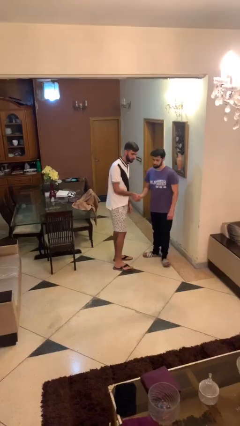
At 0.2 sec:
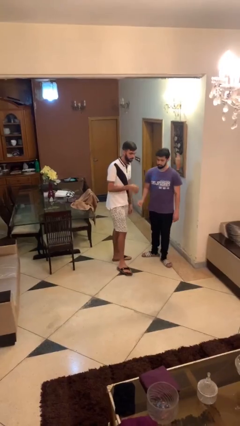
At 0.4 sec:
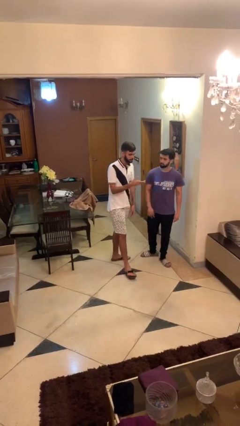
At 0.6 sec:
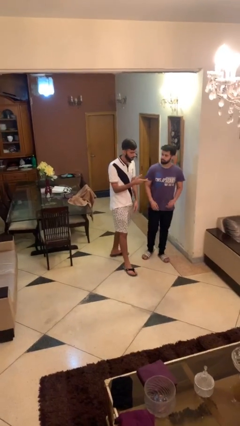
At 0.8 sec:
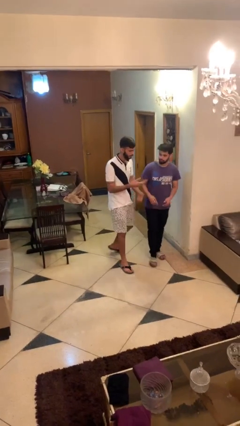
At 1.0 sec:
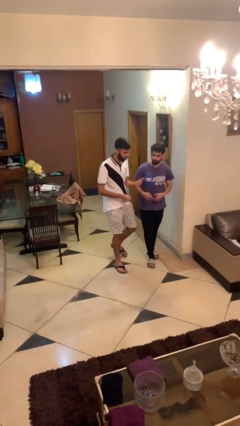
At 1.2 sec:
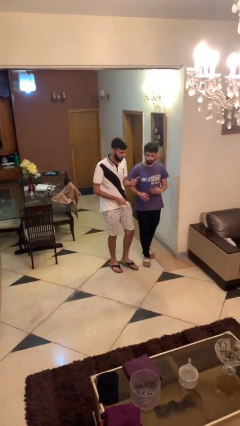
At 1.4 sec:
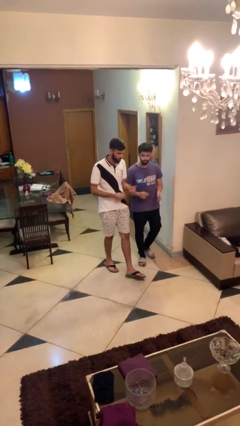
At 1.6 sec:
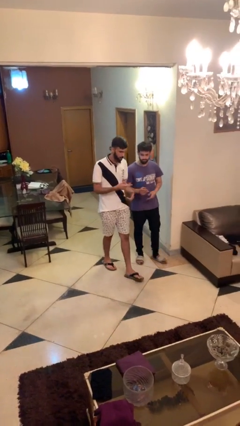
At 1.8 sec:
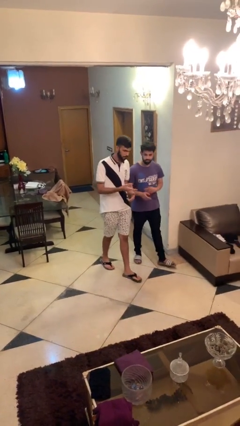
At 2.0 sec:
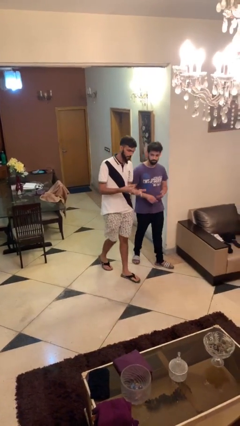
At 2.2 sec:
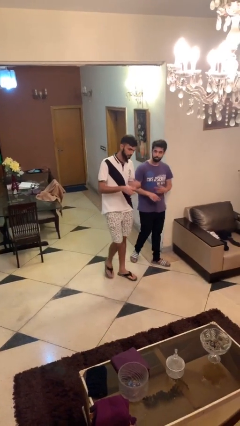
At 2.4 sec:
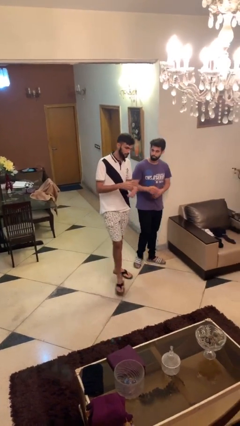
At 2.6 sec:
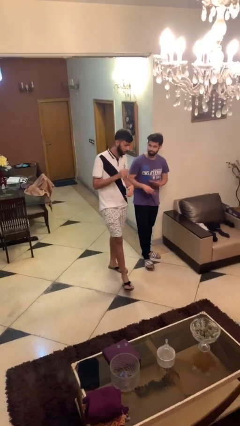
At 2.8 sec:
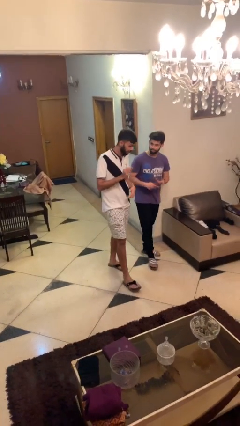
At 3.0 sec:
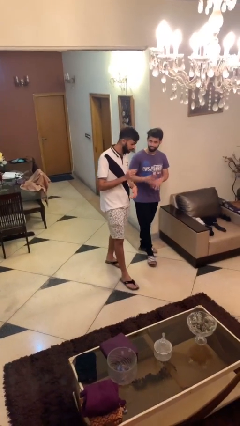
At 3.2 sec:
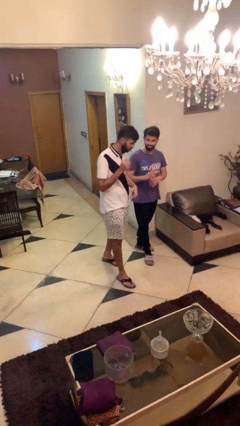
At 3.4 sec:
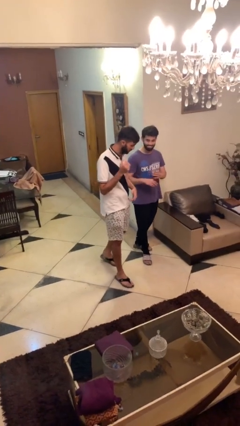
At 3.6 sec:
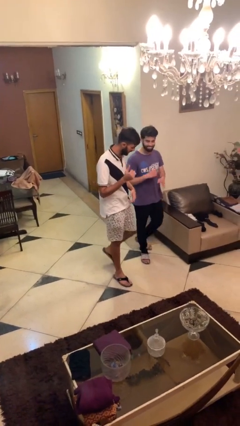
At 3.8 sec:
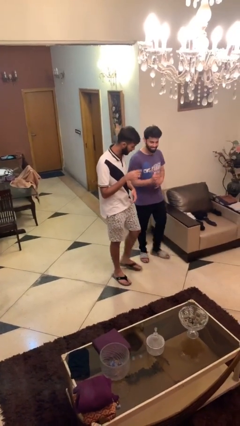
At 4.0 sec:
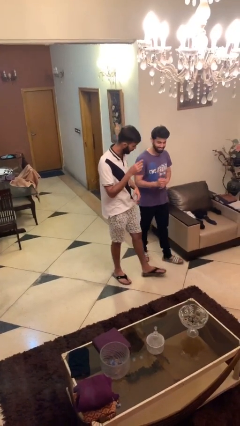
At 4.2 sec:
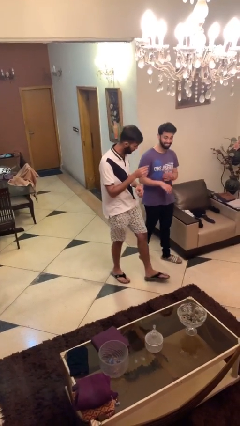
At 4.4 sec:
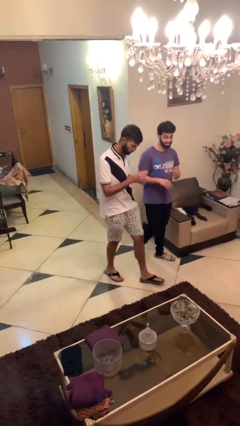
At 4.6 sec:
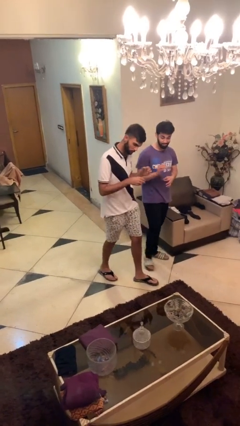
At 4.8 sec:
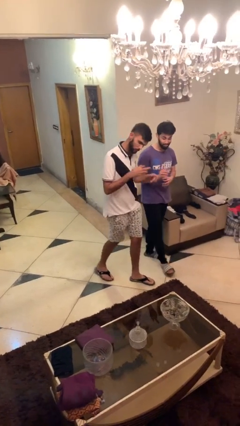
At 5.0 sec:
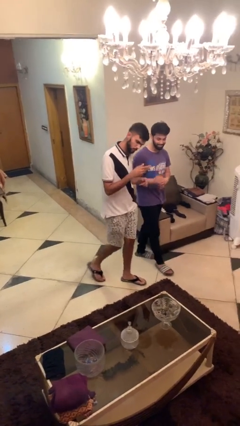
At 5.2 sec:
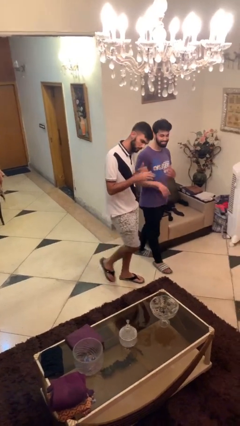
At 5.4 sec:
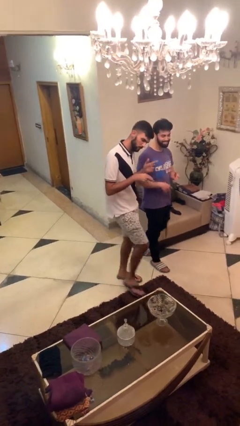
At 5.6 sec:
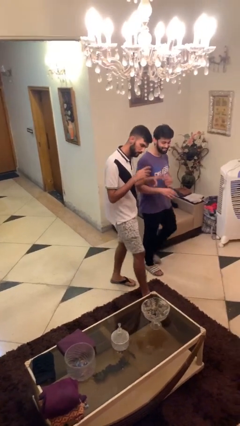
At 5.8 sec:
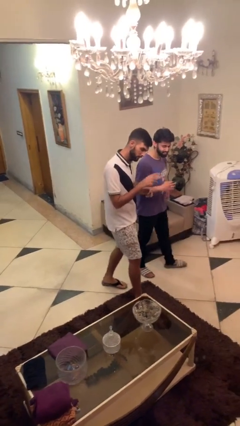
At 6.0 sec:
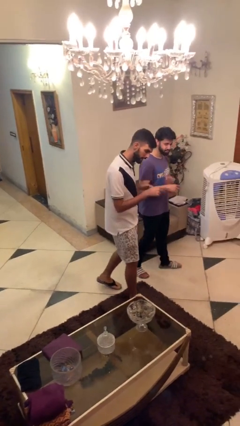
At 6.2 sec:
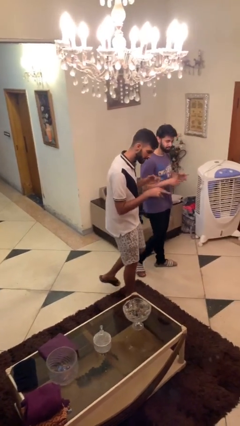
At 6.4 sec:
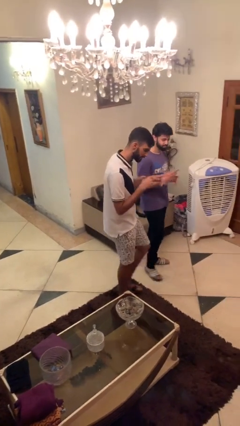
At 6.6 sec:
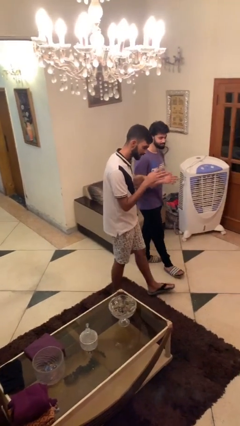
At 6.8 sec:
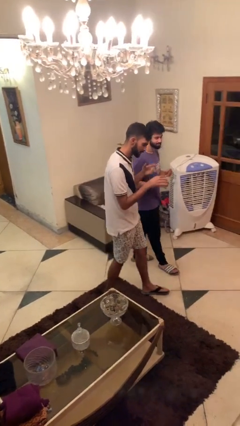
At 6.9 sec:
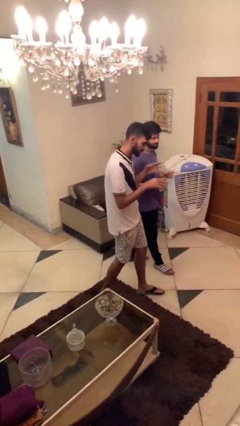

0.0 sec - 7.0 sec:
person talks to person

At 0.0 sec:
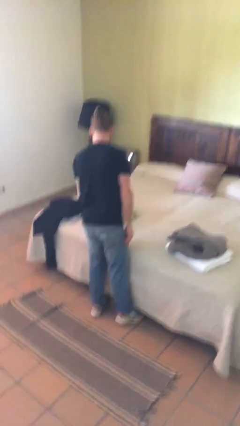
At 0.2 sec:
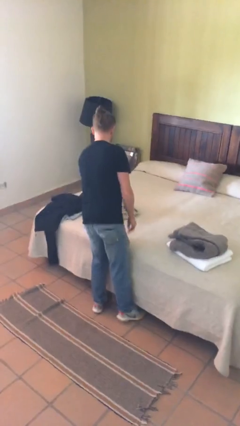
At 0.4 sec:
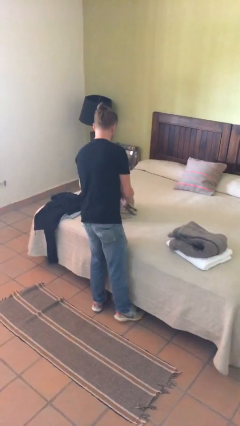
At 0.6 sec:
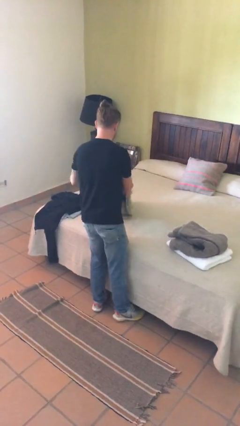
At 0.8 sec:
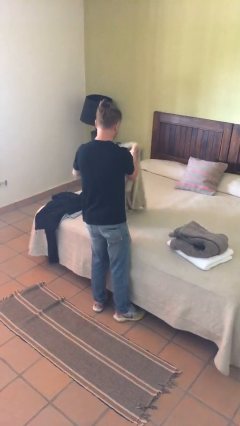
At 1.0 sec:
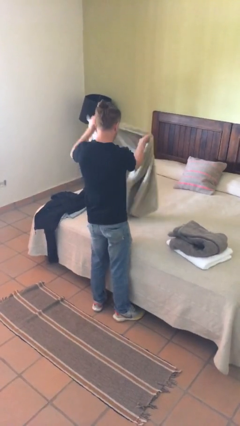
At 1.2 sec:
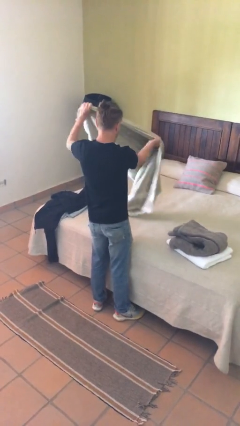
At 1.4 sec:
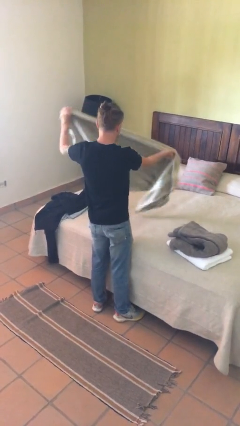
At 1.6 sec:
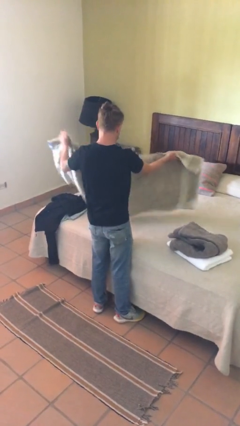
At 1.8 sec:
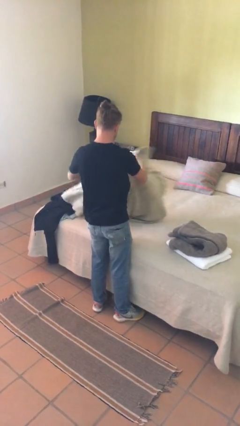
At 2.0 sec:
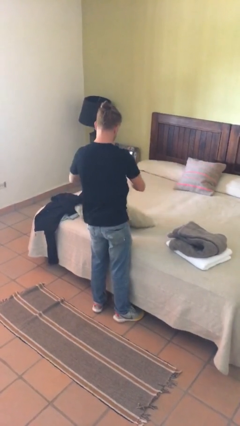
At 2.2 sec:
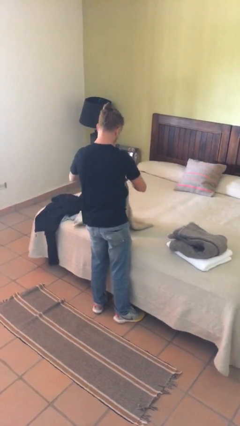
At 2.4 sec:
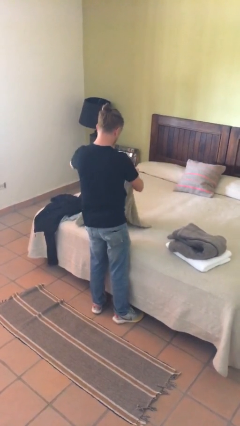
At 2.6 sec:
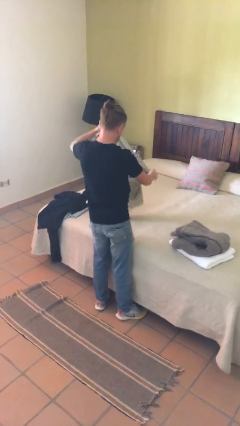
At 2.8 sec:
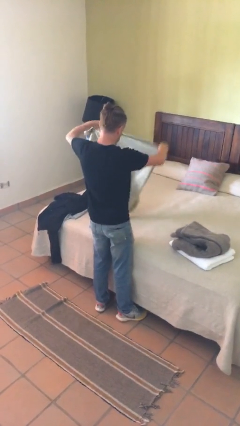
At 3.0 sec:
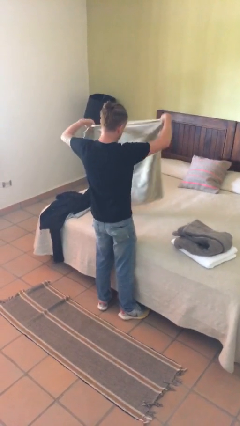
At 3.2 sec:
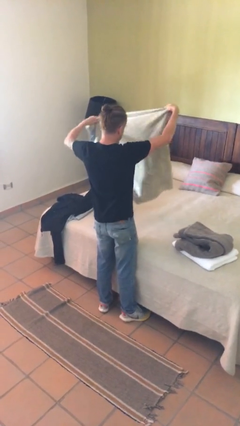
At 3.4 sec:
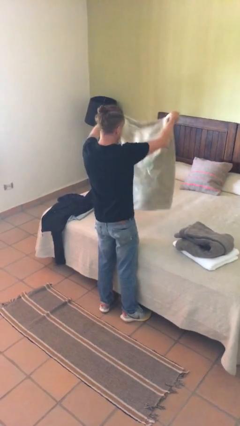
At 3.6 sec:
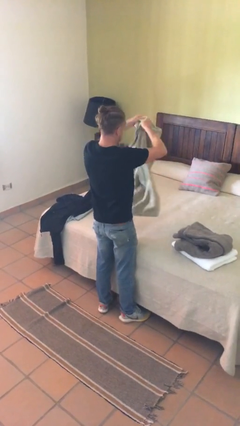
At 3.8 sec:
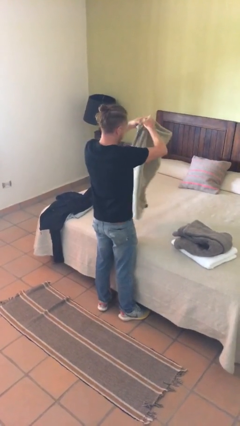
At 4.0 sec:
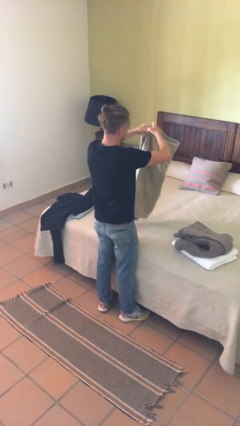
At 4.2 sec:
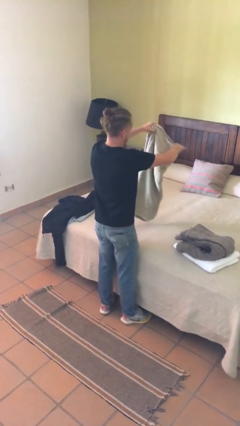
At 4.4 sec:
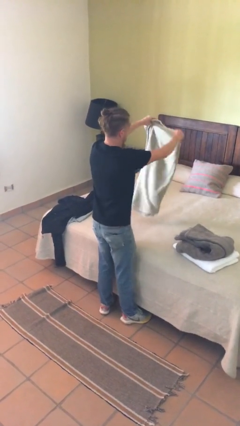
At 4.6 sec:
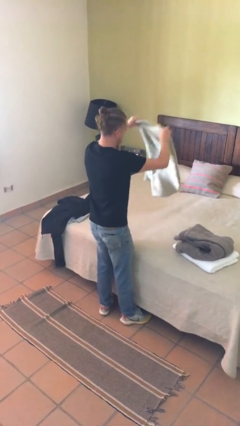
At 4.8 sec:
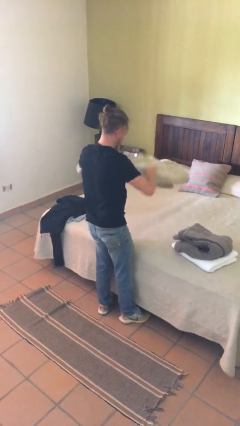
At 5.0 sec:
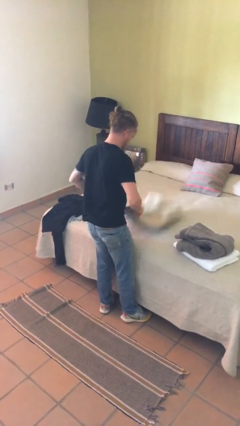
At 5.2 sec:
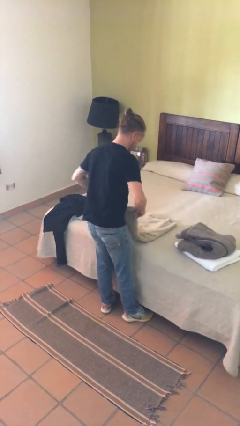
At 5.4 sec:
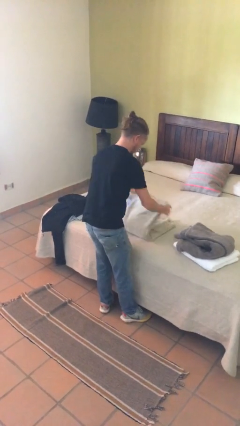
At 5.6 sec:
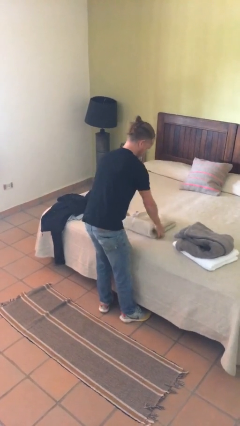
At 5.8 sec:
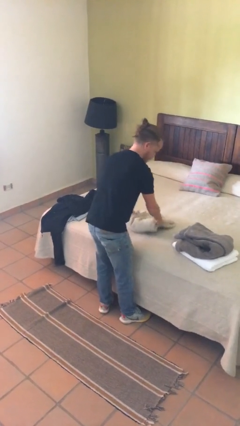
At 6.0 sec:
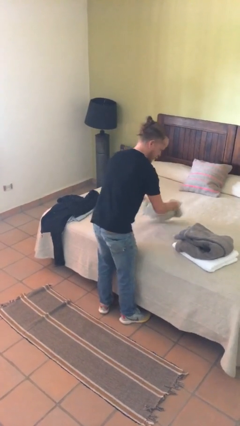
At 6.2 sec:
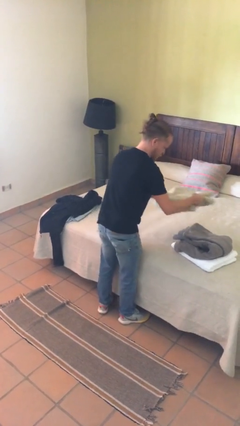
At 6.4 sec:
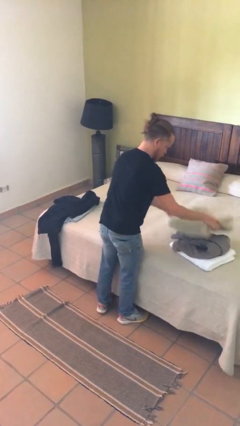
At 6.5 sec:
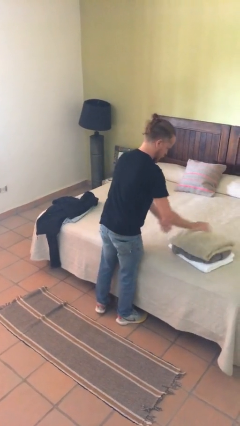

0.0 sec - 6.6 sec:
person folds towel

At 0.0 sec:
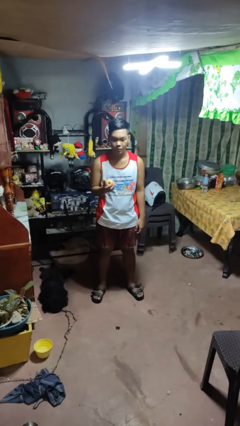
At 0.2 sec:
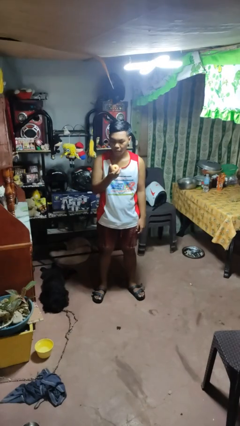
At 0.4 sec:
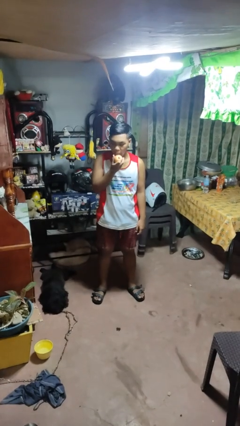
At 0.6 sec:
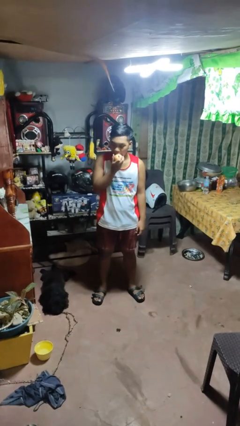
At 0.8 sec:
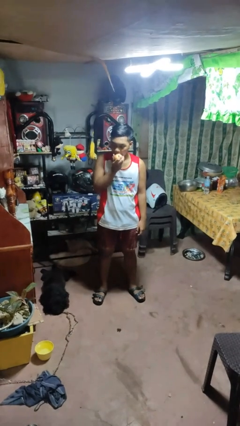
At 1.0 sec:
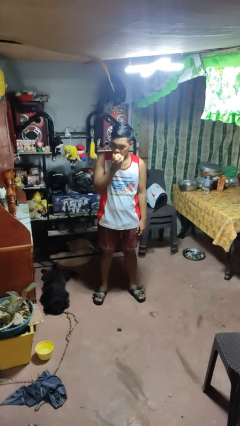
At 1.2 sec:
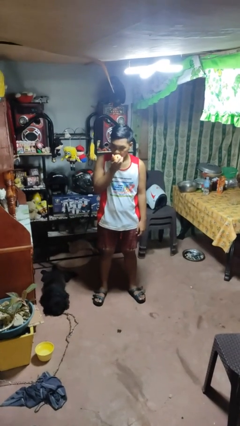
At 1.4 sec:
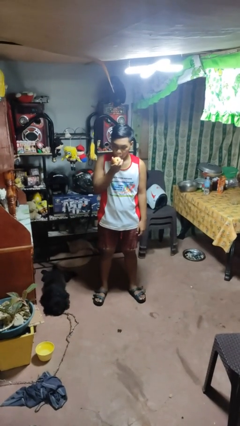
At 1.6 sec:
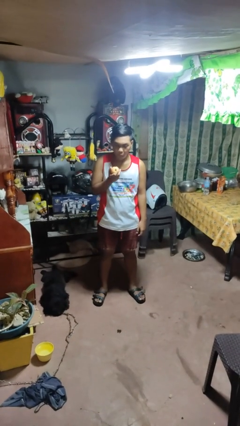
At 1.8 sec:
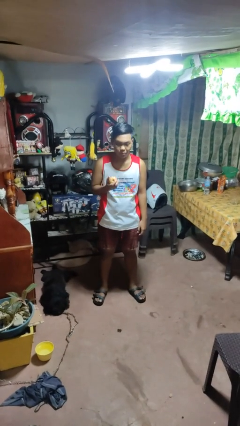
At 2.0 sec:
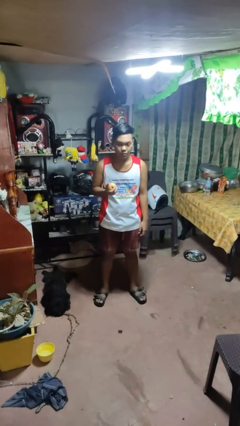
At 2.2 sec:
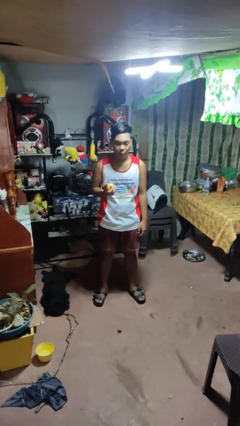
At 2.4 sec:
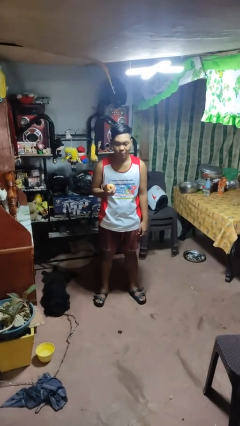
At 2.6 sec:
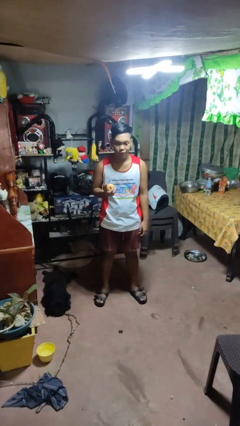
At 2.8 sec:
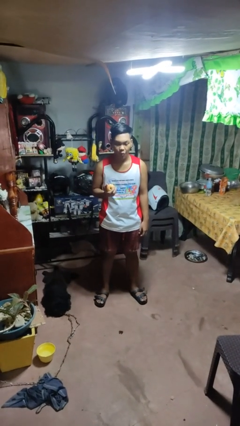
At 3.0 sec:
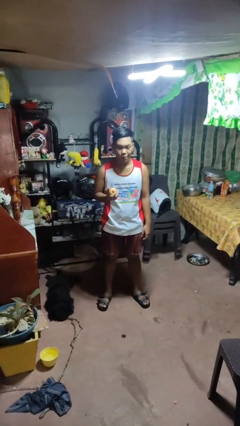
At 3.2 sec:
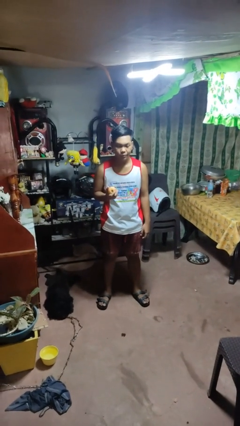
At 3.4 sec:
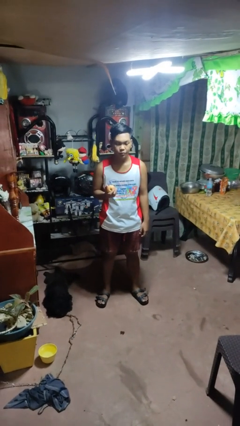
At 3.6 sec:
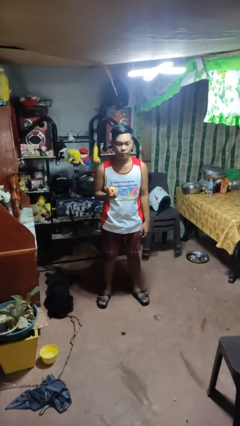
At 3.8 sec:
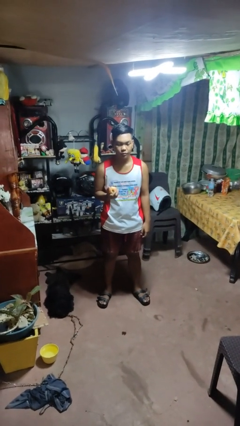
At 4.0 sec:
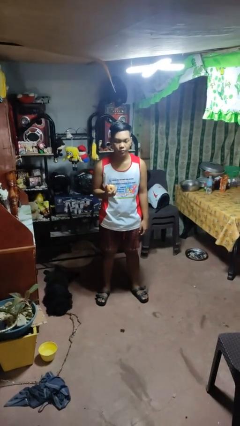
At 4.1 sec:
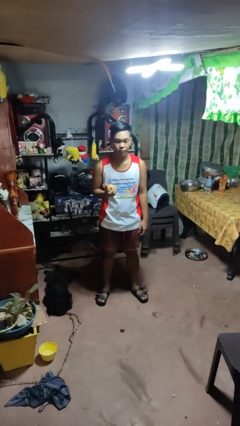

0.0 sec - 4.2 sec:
person eats apple
